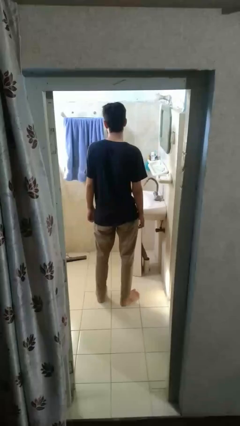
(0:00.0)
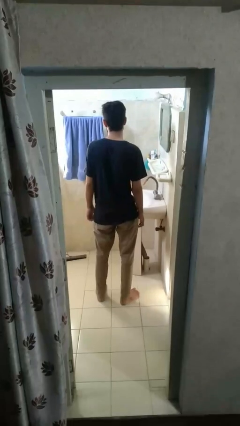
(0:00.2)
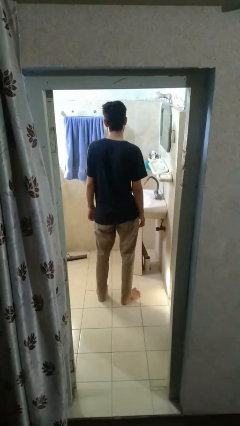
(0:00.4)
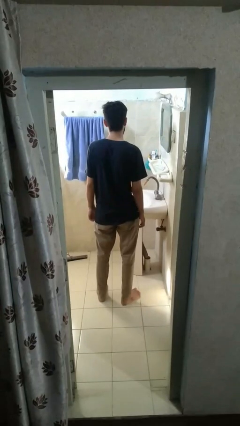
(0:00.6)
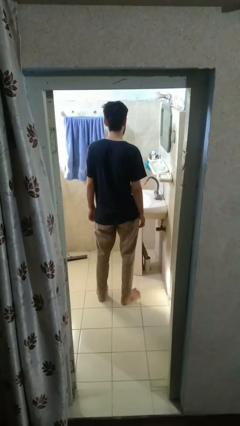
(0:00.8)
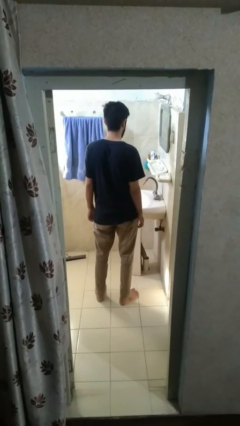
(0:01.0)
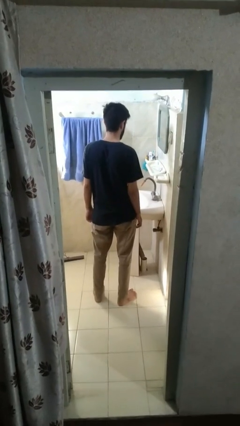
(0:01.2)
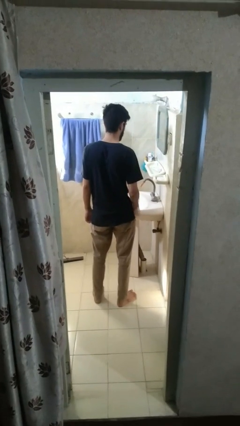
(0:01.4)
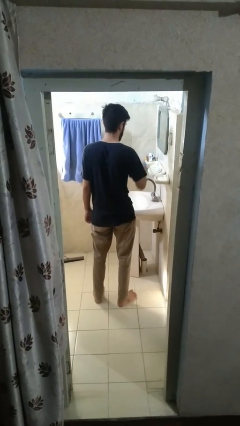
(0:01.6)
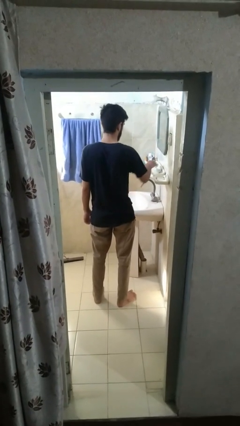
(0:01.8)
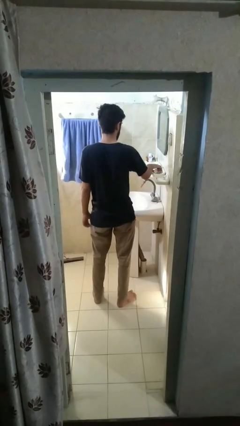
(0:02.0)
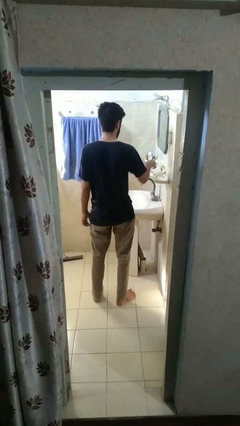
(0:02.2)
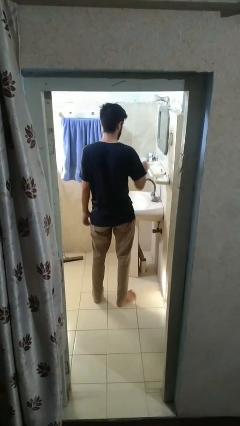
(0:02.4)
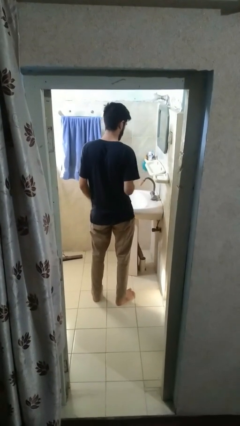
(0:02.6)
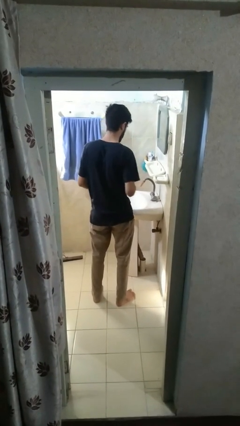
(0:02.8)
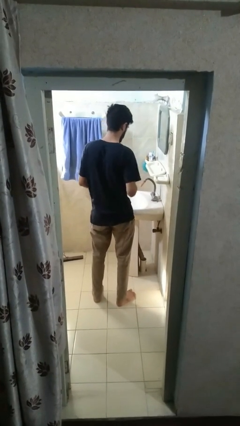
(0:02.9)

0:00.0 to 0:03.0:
person picks up object from countertop

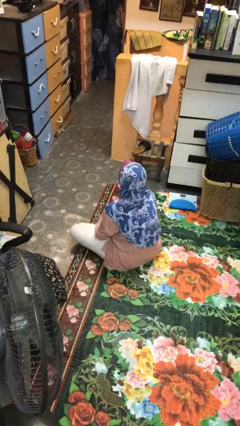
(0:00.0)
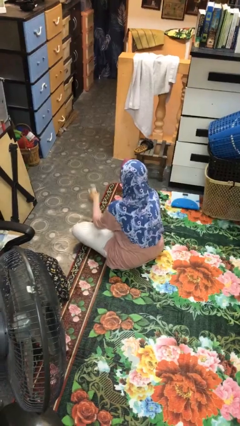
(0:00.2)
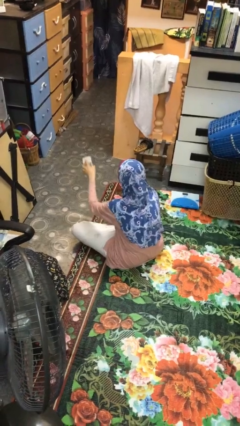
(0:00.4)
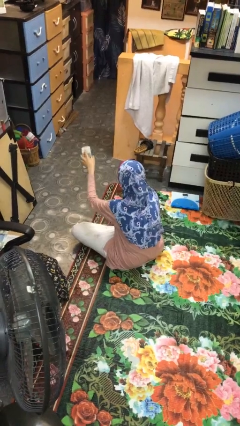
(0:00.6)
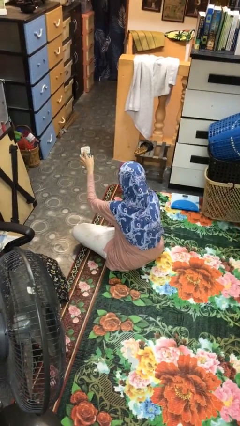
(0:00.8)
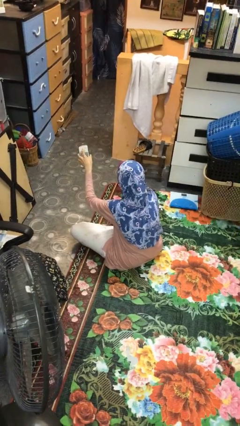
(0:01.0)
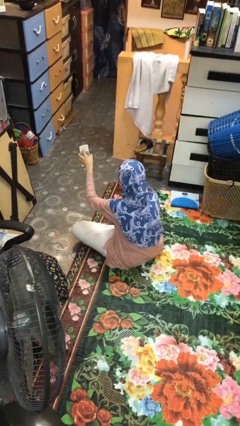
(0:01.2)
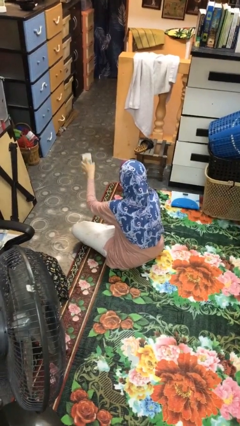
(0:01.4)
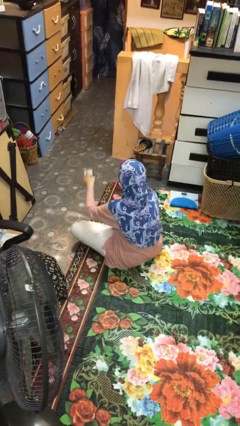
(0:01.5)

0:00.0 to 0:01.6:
person uses television remote

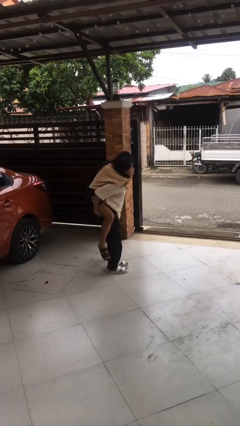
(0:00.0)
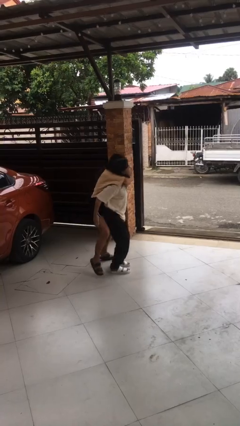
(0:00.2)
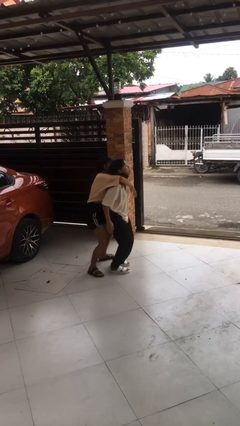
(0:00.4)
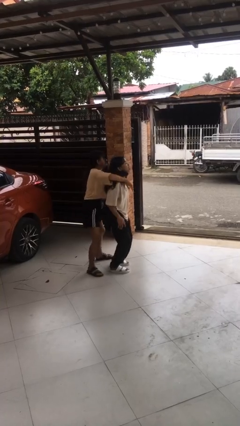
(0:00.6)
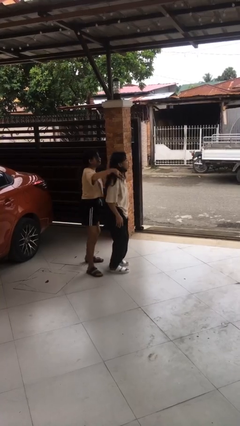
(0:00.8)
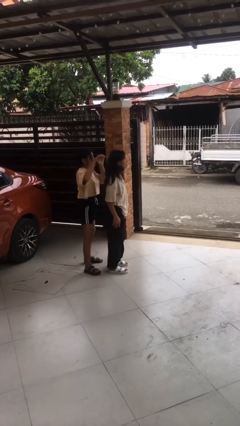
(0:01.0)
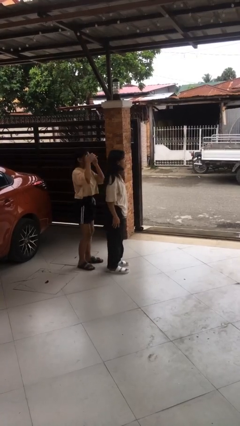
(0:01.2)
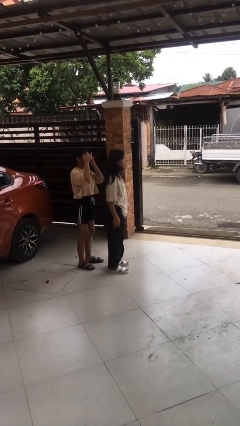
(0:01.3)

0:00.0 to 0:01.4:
person puts down person

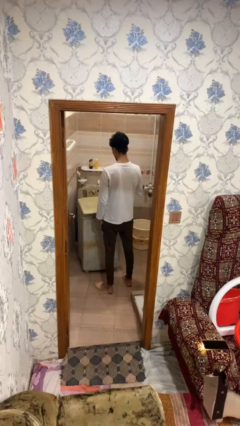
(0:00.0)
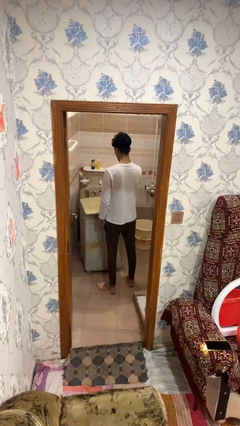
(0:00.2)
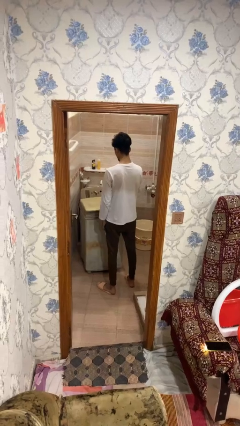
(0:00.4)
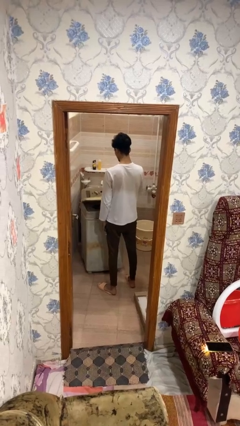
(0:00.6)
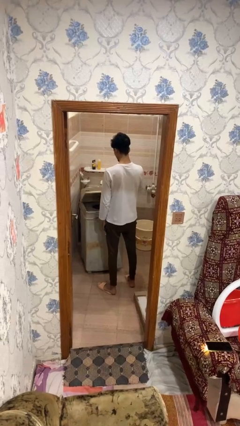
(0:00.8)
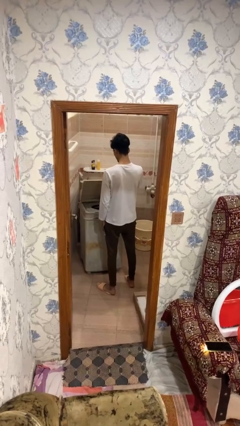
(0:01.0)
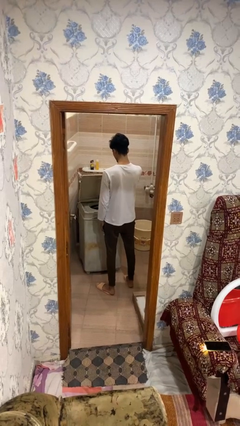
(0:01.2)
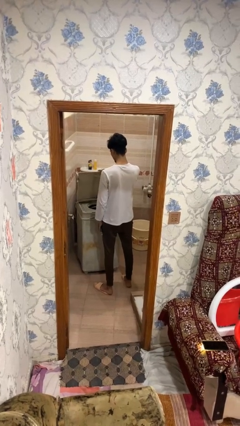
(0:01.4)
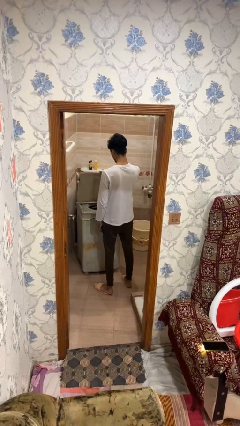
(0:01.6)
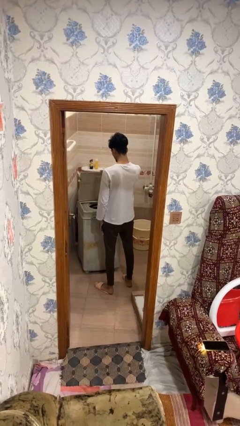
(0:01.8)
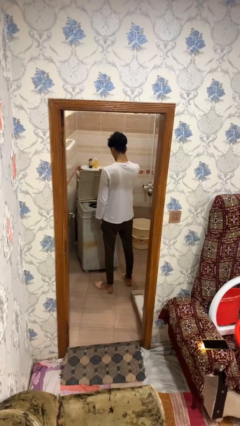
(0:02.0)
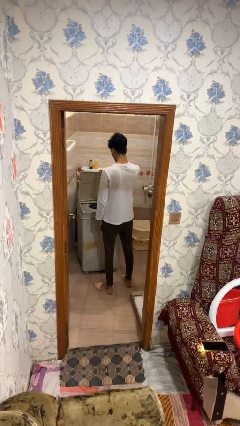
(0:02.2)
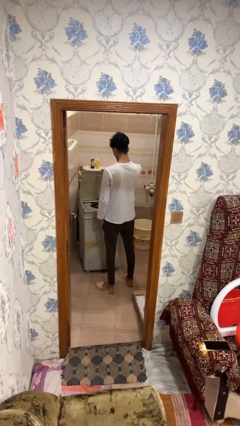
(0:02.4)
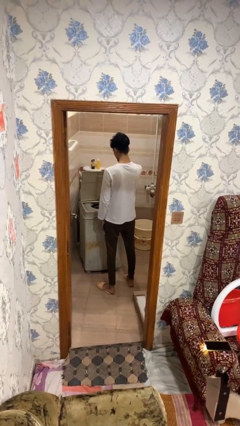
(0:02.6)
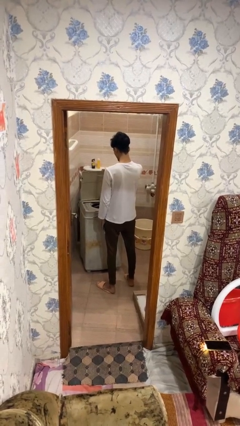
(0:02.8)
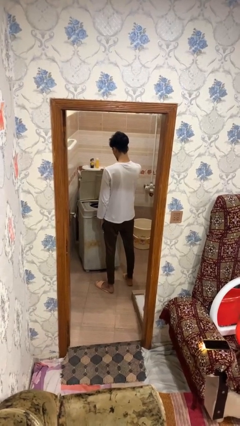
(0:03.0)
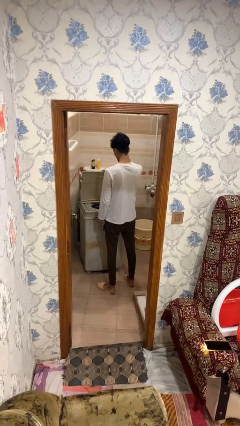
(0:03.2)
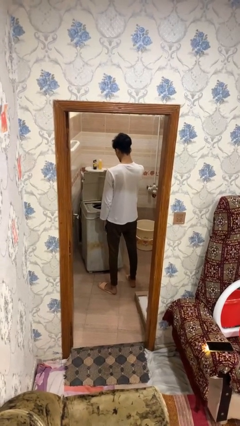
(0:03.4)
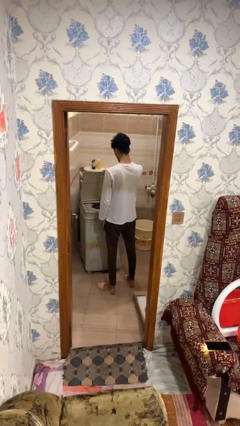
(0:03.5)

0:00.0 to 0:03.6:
person opens clothes washer

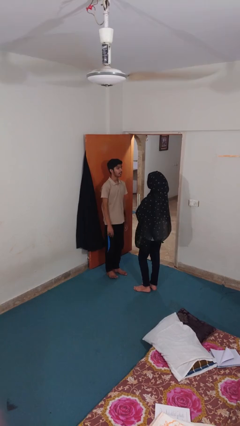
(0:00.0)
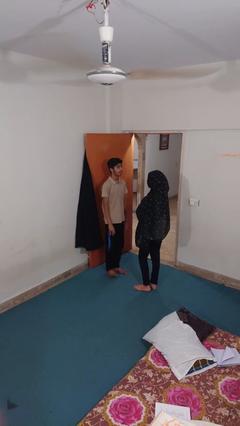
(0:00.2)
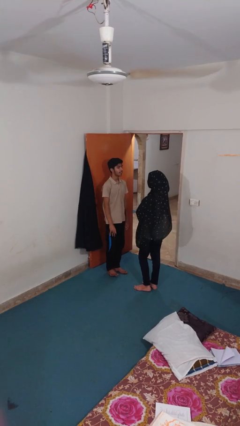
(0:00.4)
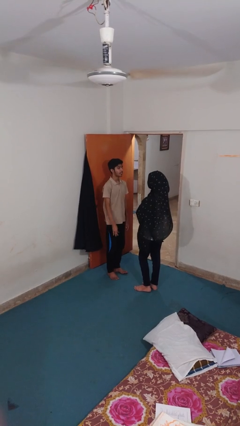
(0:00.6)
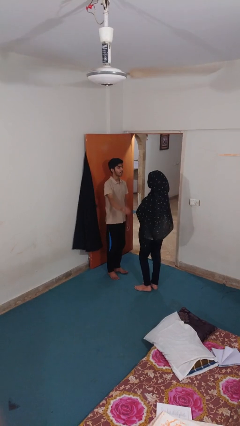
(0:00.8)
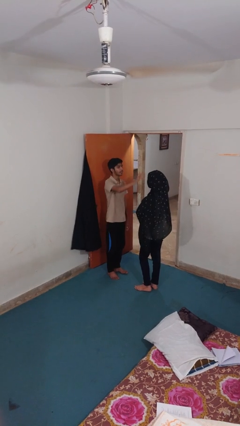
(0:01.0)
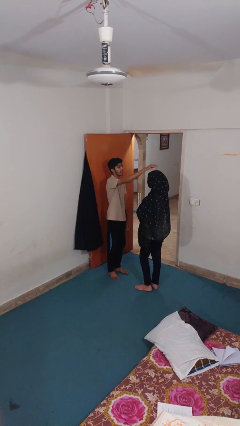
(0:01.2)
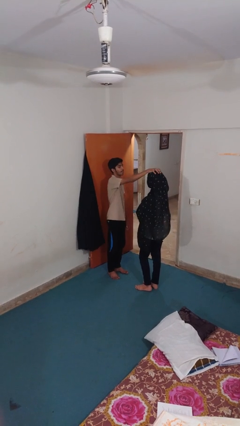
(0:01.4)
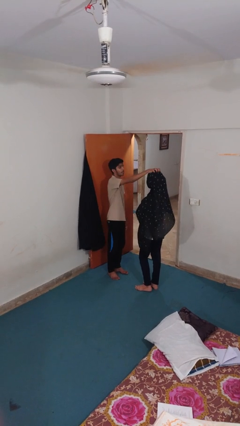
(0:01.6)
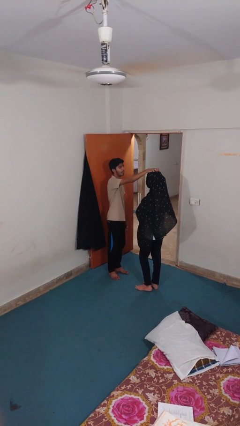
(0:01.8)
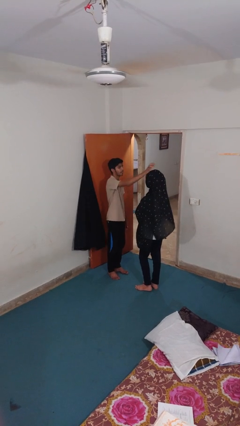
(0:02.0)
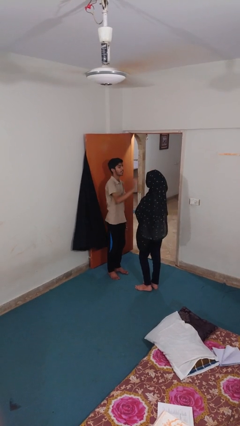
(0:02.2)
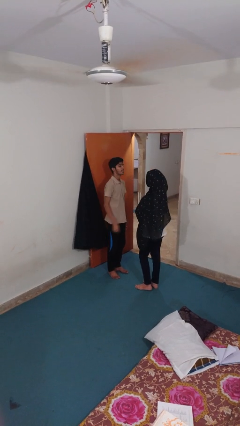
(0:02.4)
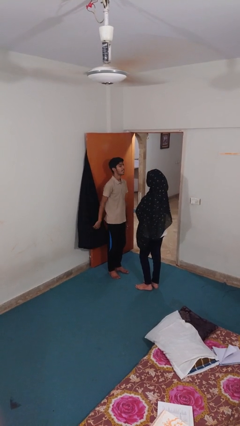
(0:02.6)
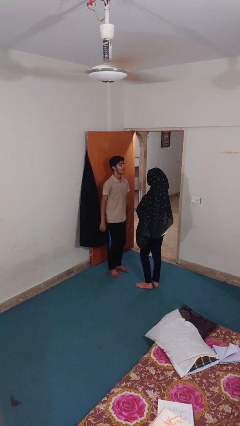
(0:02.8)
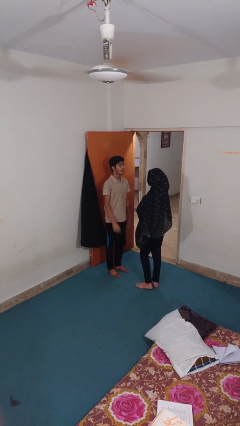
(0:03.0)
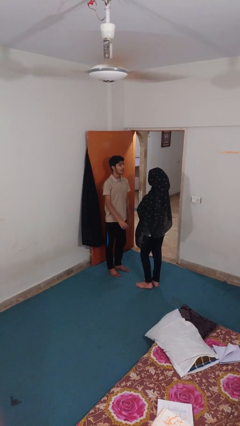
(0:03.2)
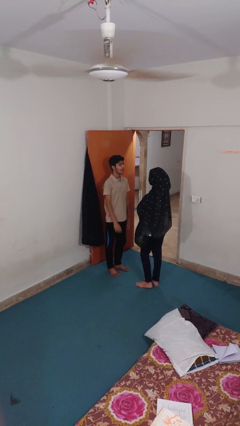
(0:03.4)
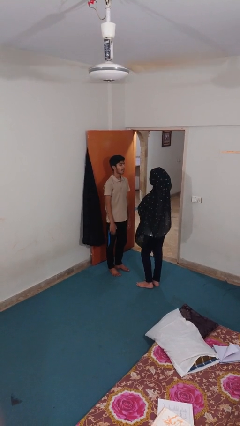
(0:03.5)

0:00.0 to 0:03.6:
person grabs person by hair

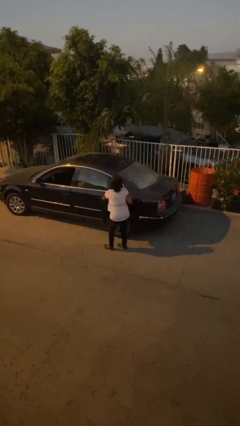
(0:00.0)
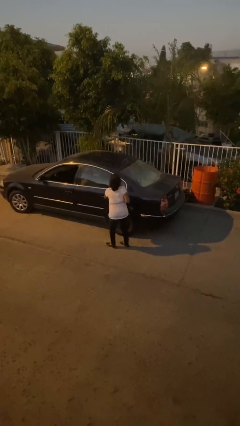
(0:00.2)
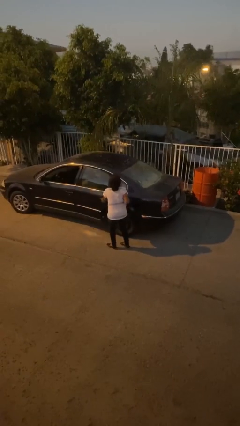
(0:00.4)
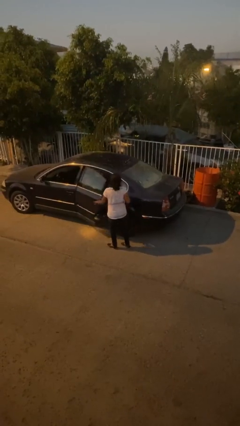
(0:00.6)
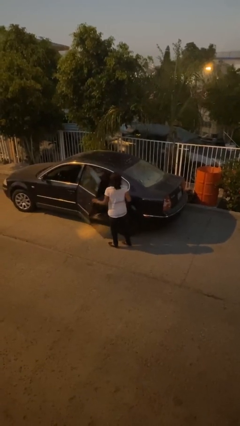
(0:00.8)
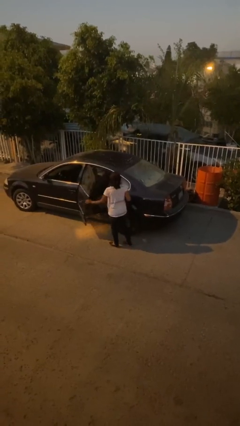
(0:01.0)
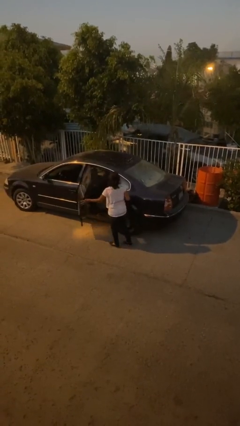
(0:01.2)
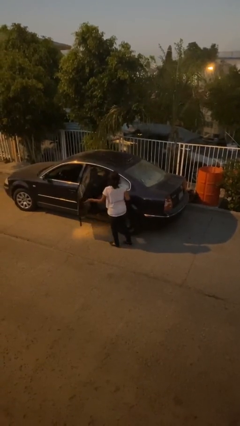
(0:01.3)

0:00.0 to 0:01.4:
person opens car door

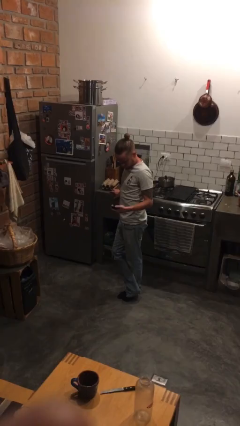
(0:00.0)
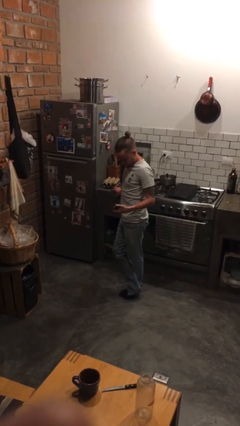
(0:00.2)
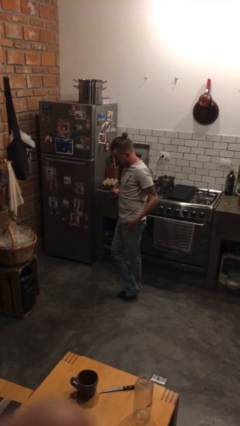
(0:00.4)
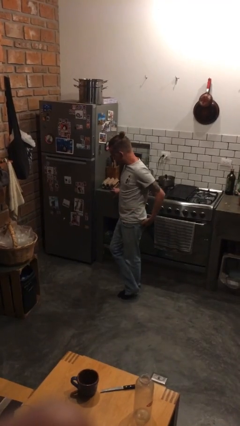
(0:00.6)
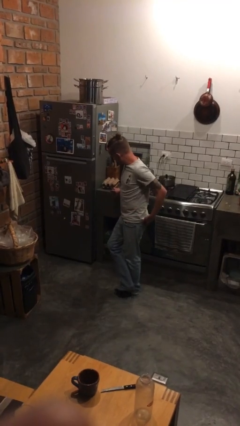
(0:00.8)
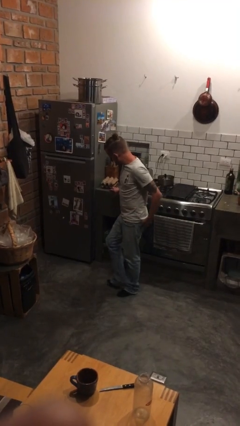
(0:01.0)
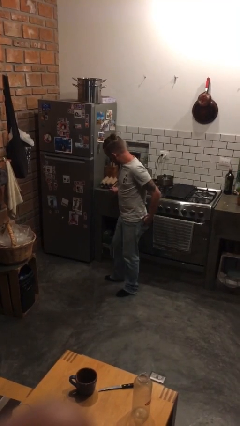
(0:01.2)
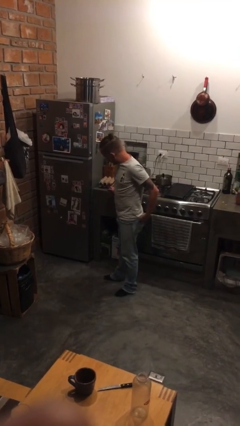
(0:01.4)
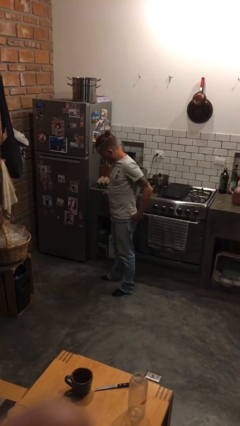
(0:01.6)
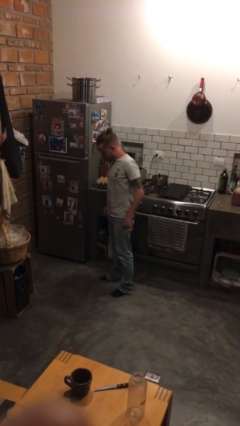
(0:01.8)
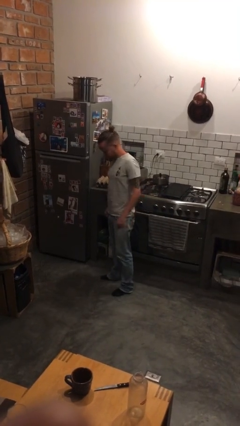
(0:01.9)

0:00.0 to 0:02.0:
person puts phone into pocket

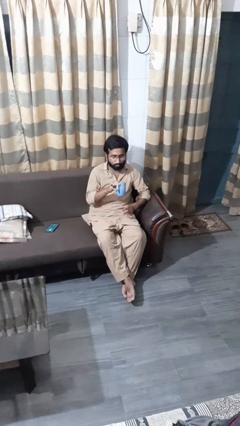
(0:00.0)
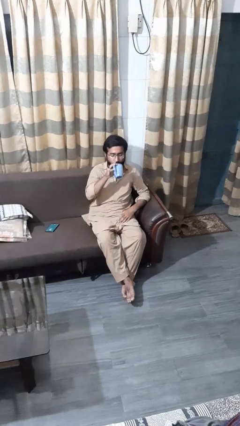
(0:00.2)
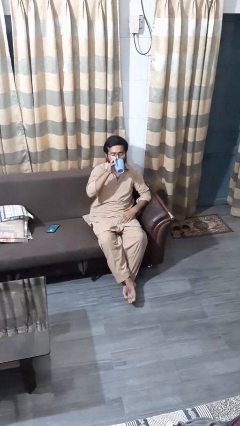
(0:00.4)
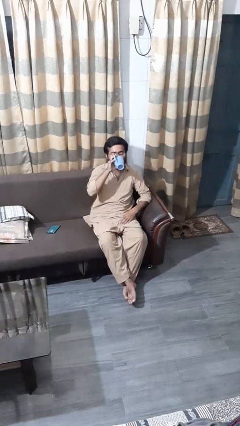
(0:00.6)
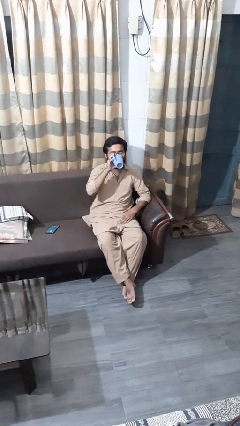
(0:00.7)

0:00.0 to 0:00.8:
person drinks from mug
